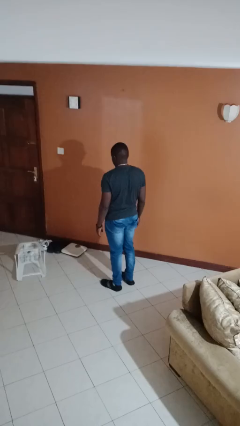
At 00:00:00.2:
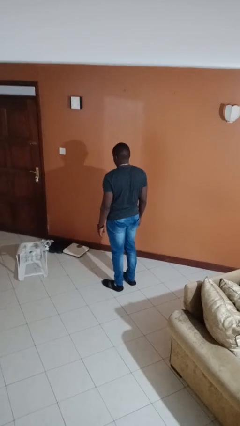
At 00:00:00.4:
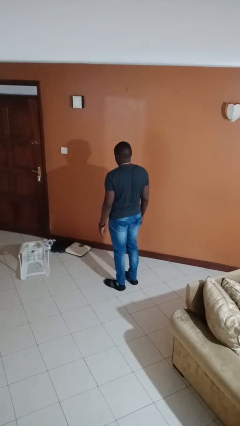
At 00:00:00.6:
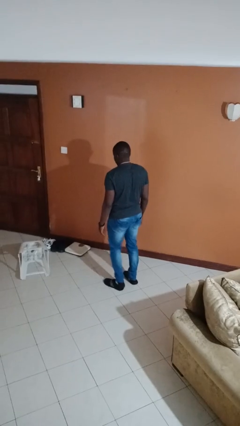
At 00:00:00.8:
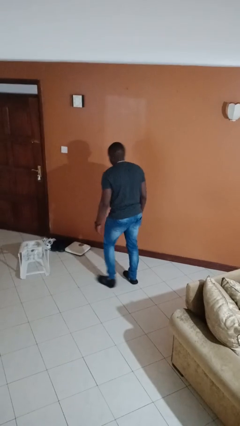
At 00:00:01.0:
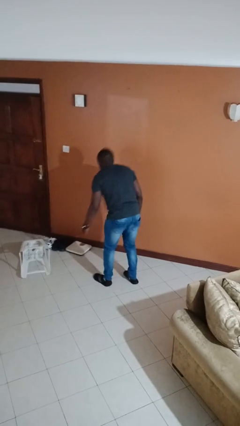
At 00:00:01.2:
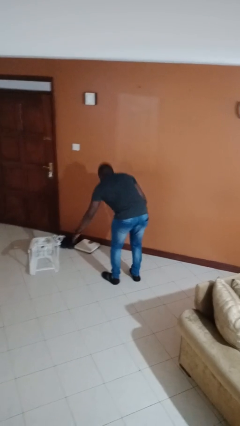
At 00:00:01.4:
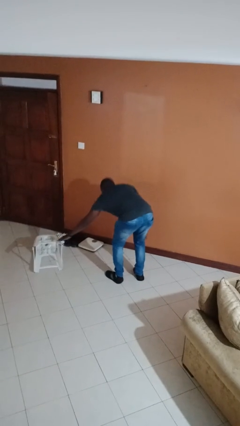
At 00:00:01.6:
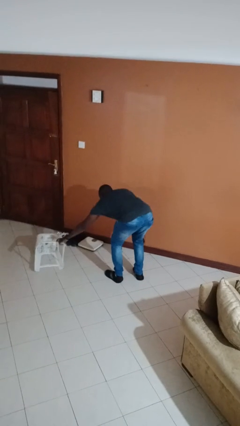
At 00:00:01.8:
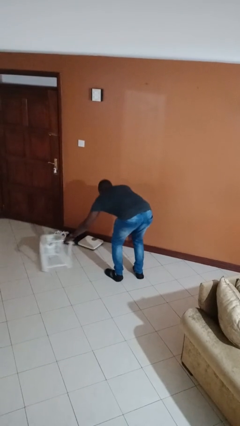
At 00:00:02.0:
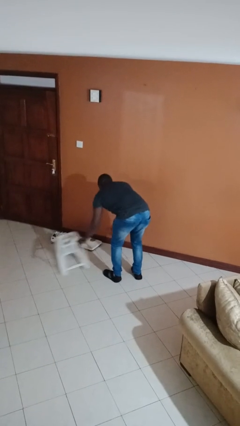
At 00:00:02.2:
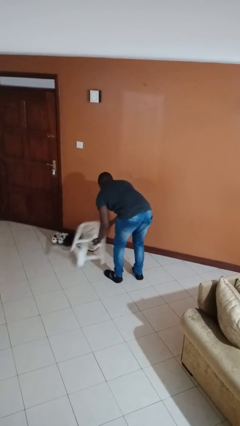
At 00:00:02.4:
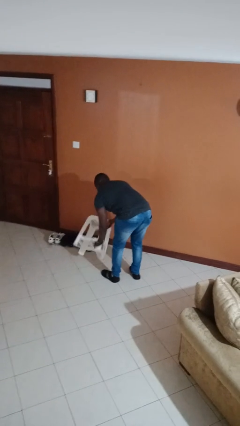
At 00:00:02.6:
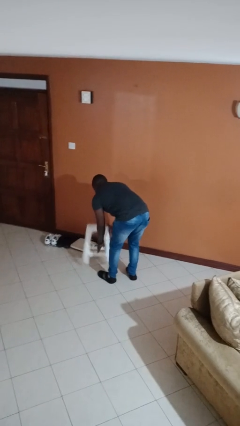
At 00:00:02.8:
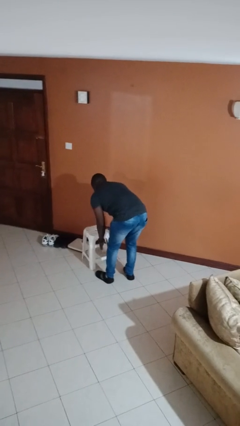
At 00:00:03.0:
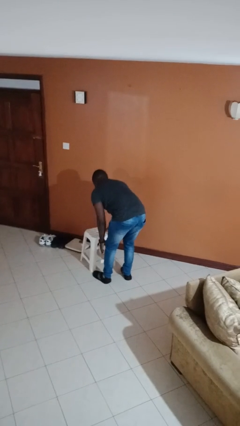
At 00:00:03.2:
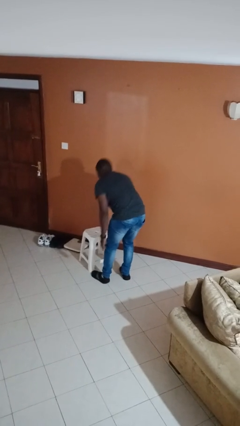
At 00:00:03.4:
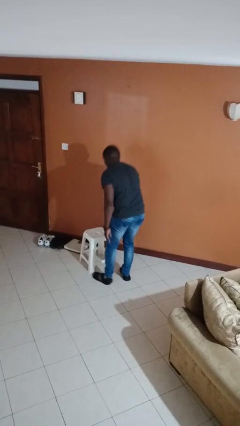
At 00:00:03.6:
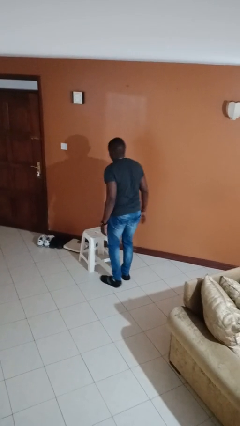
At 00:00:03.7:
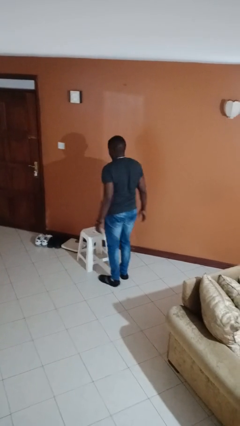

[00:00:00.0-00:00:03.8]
person sets upright furniture

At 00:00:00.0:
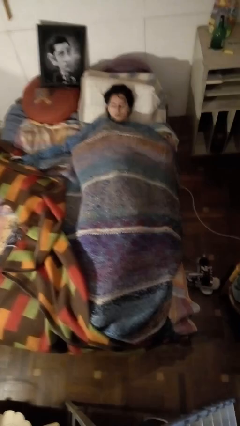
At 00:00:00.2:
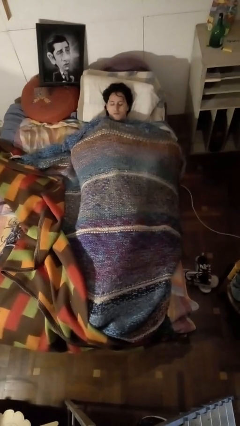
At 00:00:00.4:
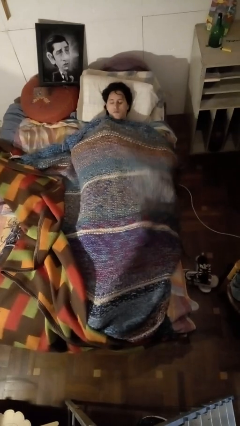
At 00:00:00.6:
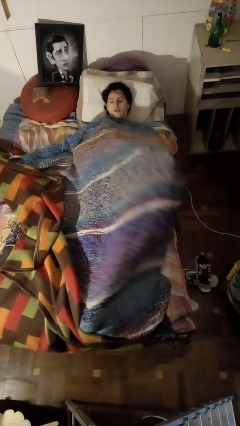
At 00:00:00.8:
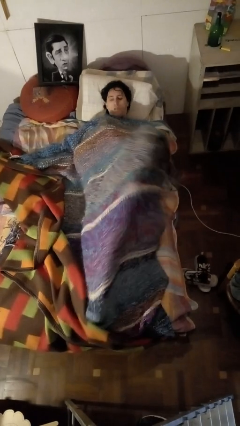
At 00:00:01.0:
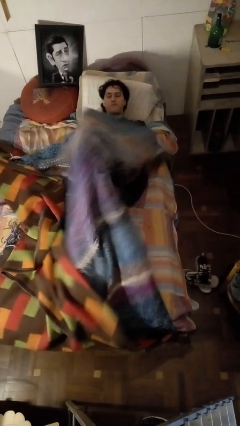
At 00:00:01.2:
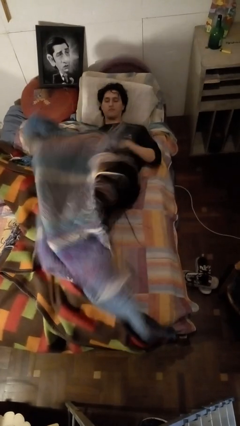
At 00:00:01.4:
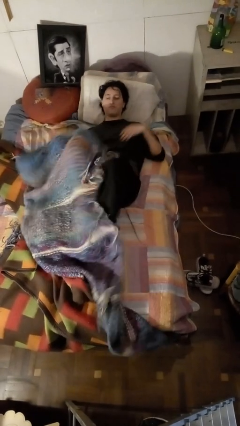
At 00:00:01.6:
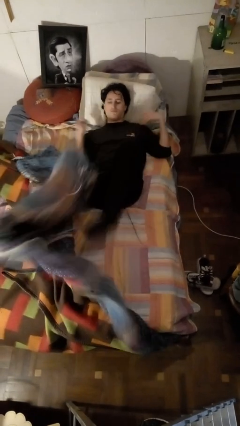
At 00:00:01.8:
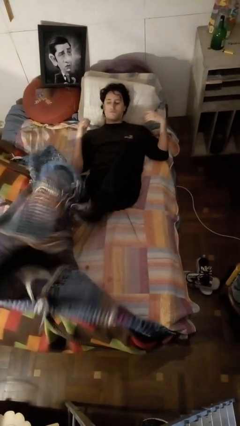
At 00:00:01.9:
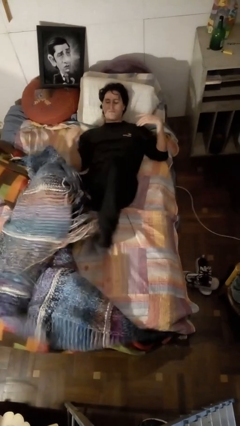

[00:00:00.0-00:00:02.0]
person uncovers with bedsheets

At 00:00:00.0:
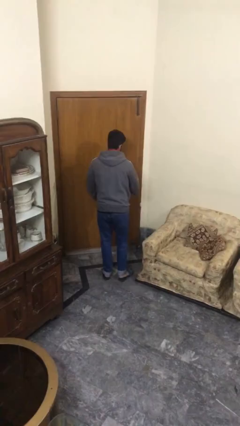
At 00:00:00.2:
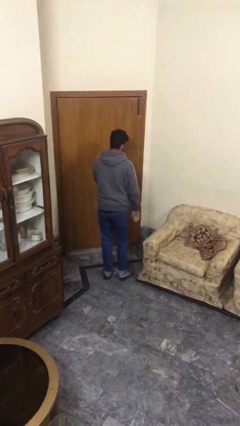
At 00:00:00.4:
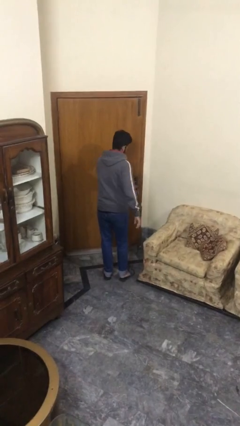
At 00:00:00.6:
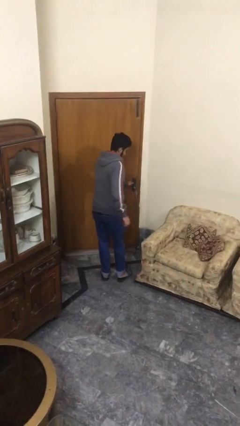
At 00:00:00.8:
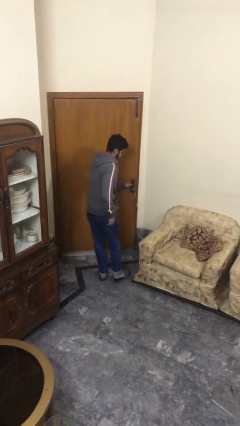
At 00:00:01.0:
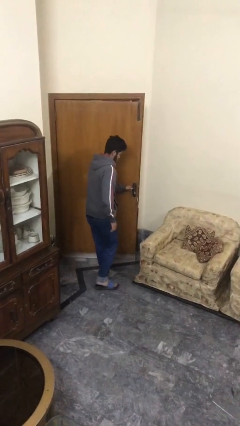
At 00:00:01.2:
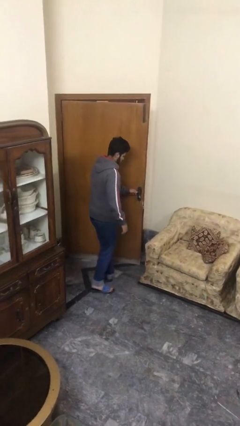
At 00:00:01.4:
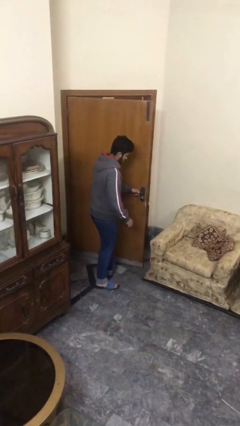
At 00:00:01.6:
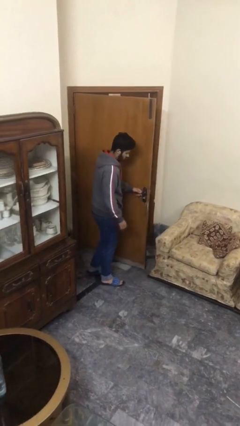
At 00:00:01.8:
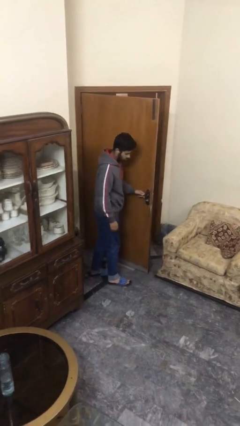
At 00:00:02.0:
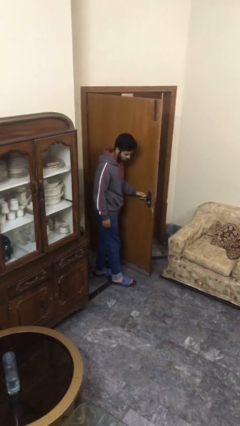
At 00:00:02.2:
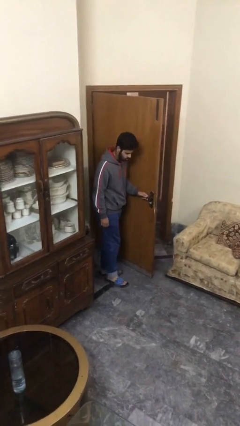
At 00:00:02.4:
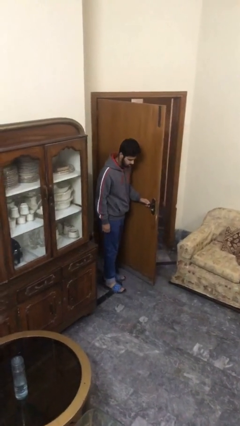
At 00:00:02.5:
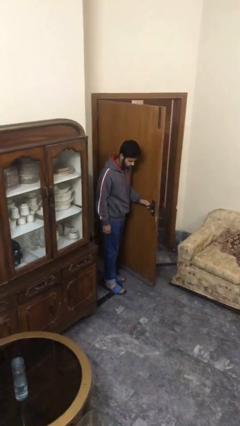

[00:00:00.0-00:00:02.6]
person opens facility door

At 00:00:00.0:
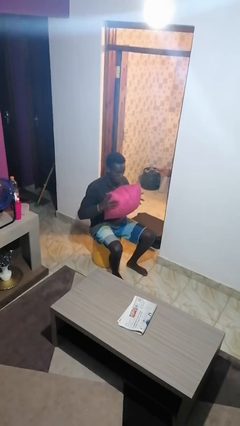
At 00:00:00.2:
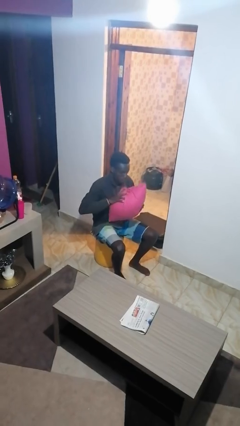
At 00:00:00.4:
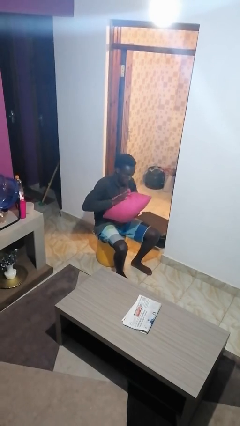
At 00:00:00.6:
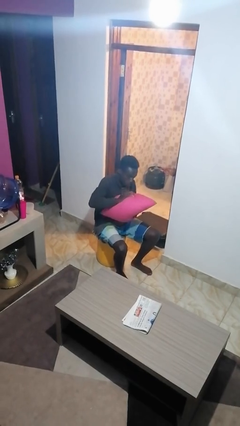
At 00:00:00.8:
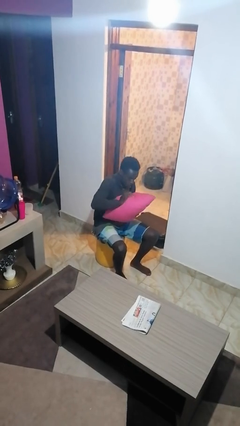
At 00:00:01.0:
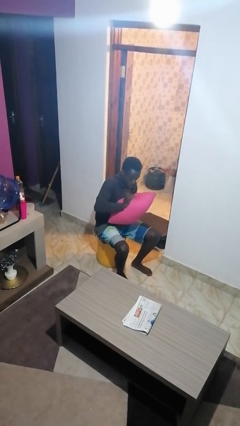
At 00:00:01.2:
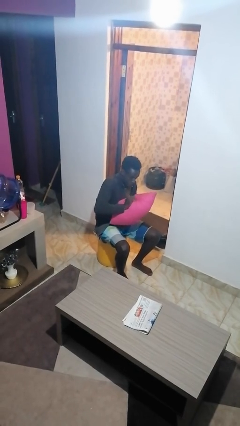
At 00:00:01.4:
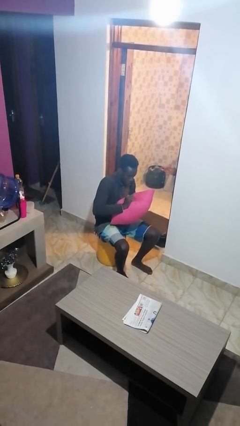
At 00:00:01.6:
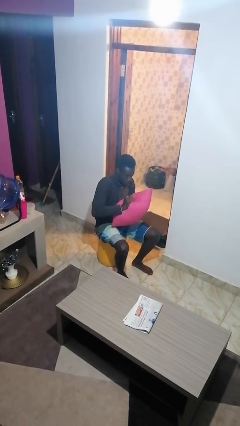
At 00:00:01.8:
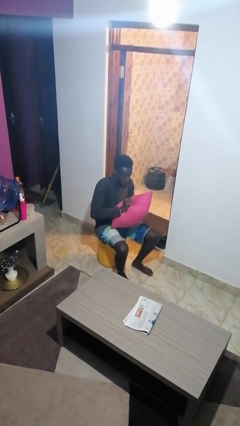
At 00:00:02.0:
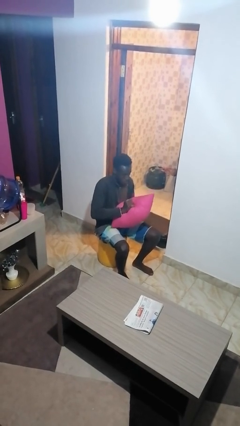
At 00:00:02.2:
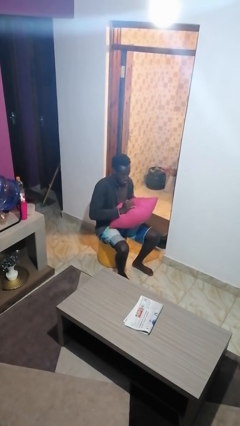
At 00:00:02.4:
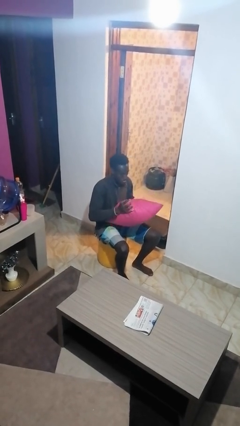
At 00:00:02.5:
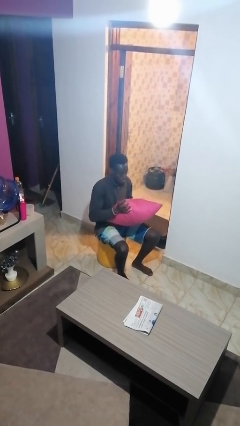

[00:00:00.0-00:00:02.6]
person squeezes object

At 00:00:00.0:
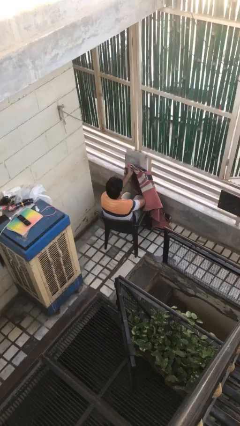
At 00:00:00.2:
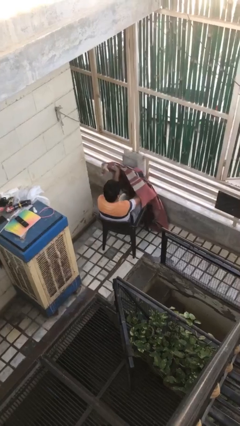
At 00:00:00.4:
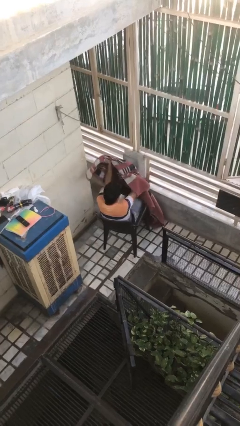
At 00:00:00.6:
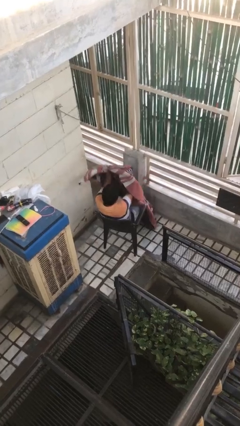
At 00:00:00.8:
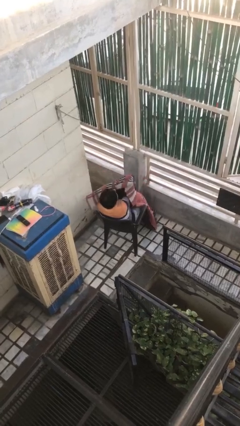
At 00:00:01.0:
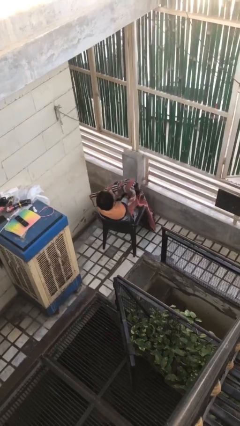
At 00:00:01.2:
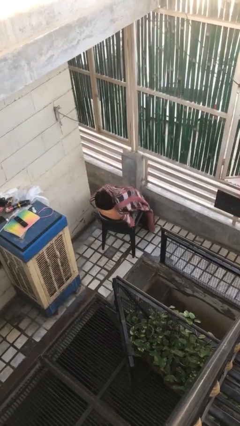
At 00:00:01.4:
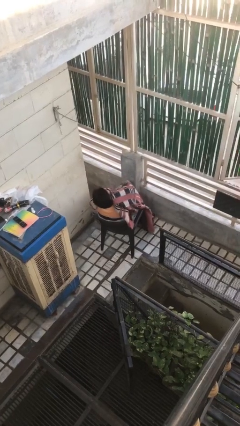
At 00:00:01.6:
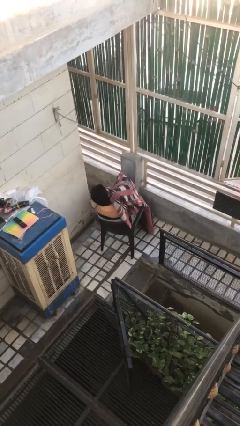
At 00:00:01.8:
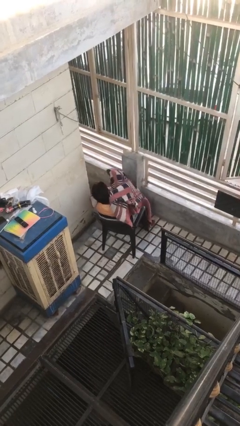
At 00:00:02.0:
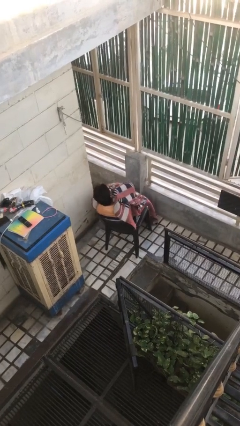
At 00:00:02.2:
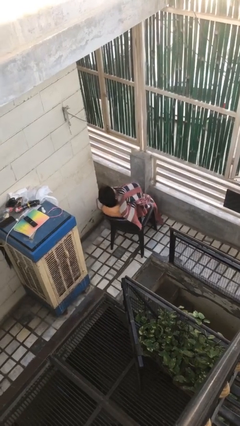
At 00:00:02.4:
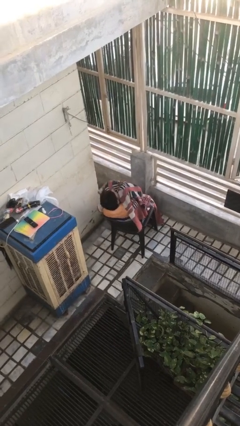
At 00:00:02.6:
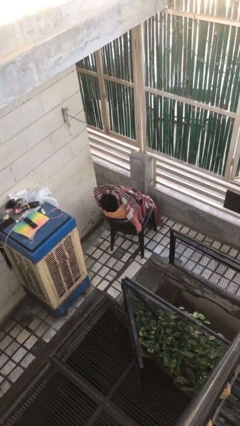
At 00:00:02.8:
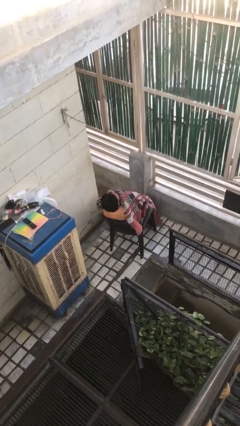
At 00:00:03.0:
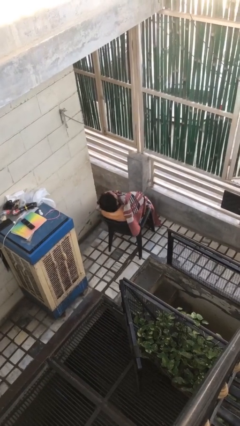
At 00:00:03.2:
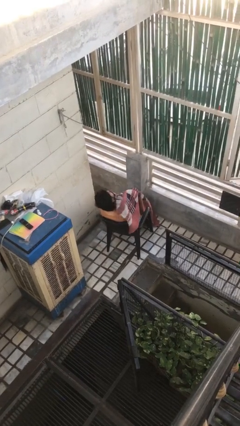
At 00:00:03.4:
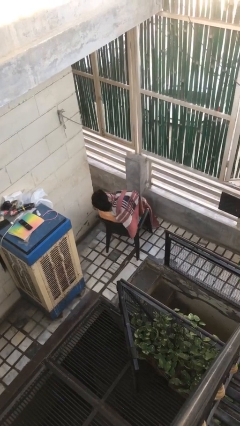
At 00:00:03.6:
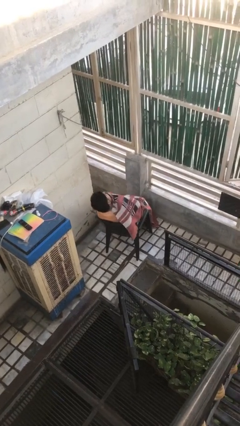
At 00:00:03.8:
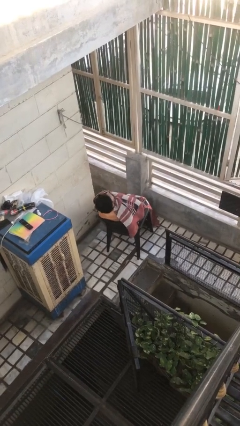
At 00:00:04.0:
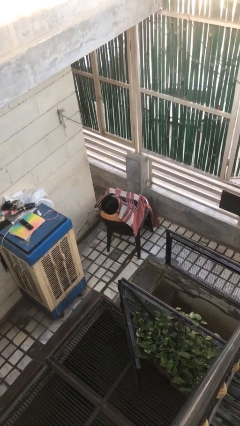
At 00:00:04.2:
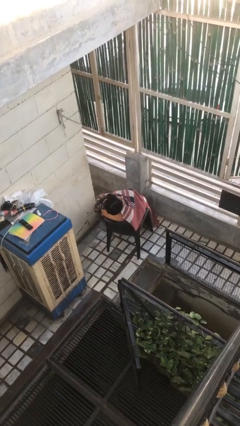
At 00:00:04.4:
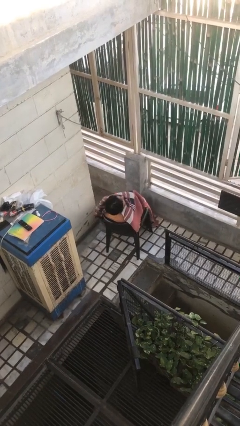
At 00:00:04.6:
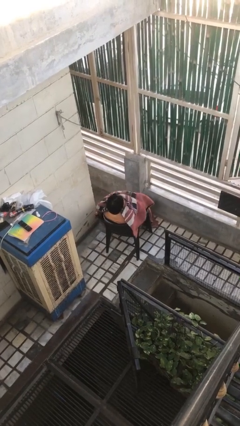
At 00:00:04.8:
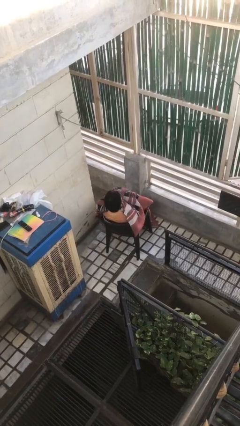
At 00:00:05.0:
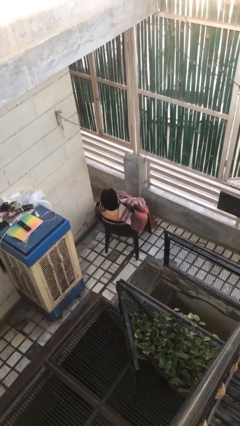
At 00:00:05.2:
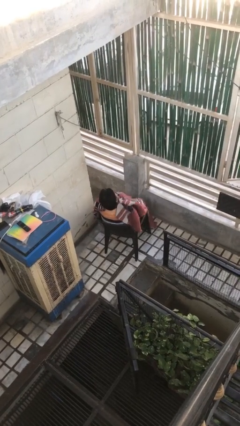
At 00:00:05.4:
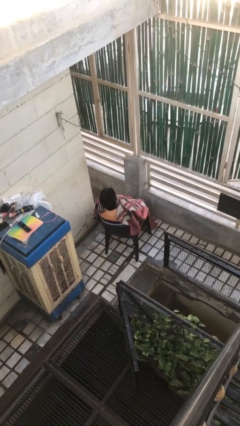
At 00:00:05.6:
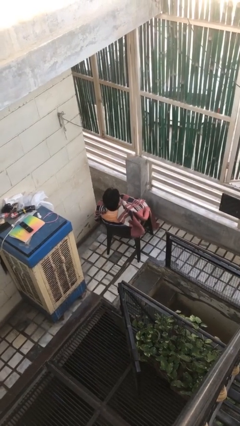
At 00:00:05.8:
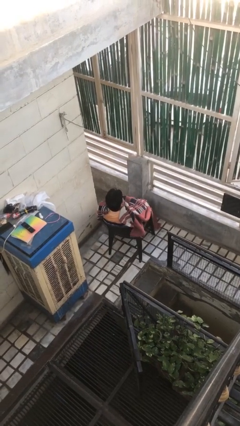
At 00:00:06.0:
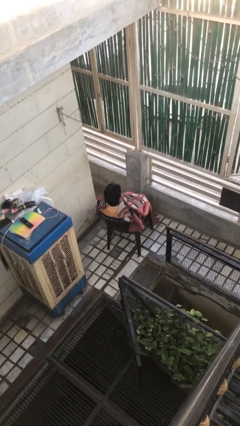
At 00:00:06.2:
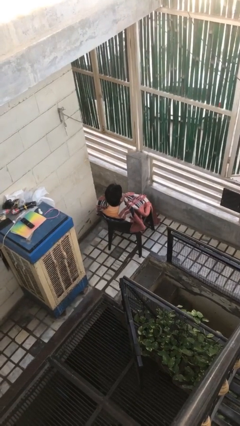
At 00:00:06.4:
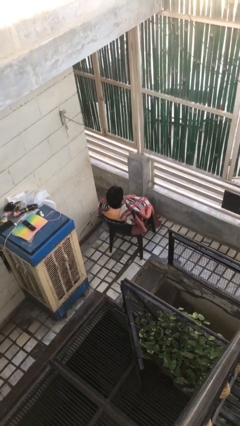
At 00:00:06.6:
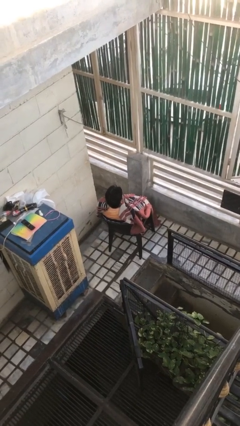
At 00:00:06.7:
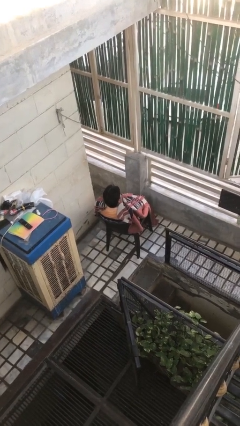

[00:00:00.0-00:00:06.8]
person covers with blanket
